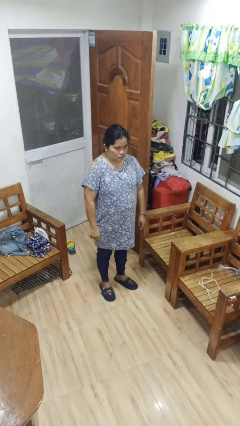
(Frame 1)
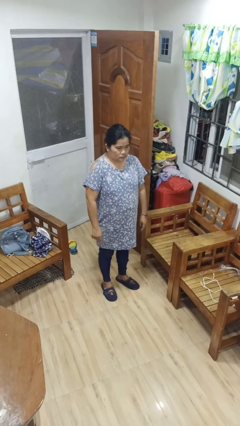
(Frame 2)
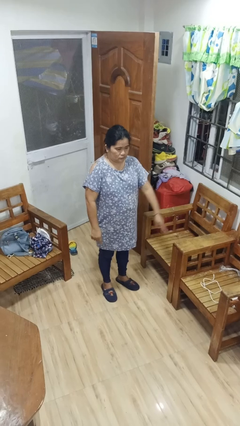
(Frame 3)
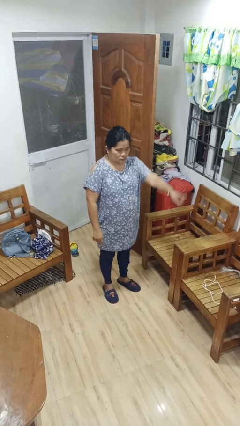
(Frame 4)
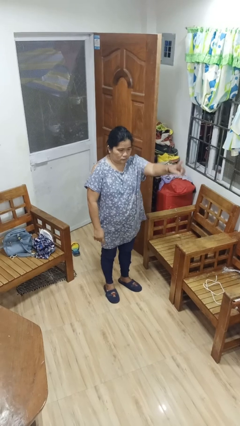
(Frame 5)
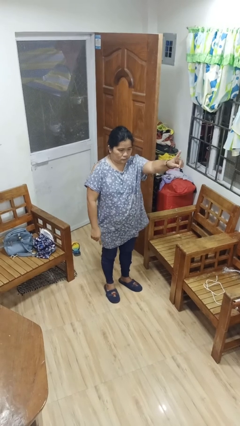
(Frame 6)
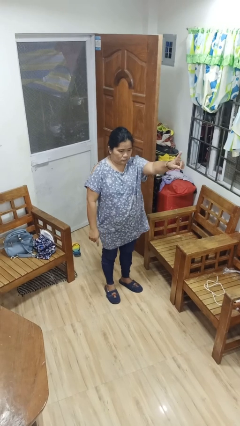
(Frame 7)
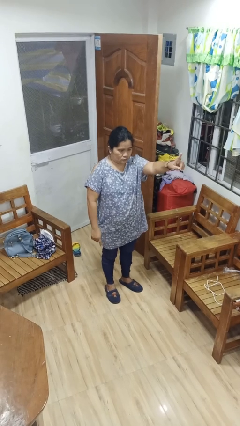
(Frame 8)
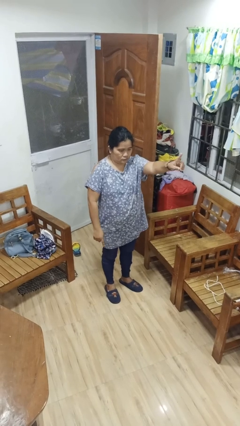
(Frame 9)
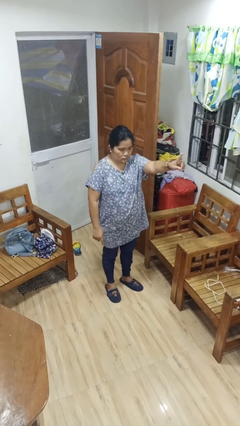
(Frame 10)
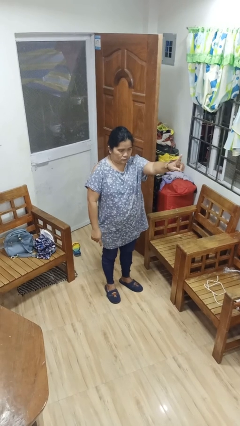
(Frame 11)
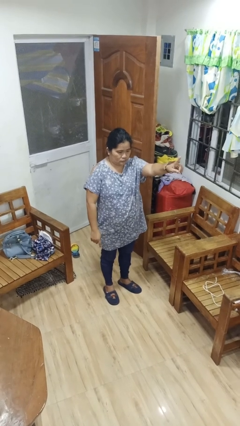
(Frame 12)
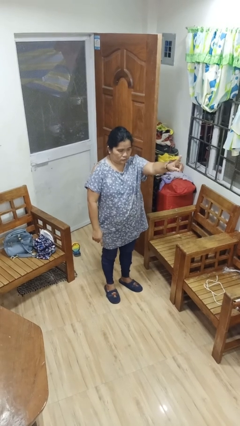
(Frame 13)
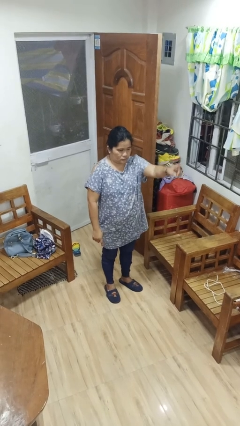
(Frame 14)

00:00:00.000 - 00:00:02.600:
person gestures number one

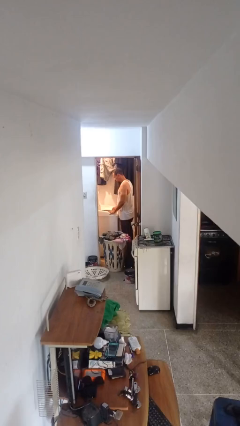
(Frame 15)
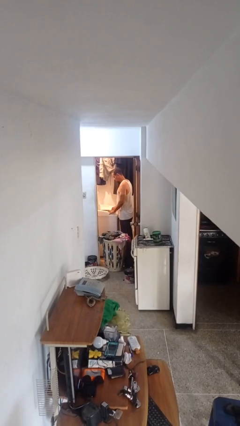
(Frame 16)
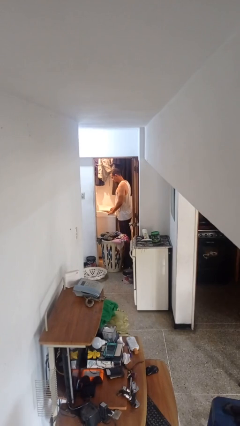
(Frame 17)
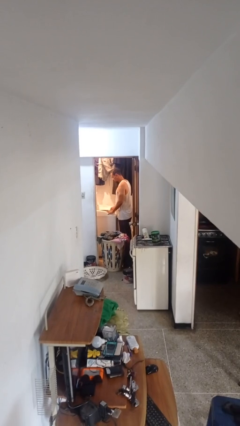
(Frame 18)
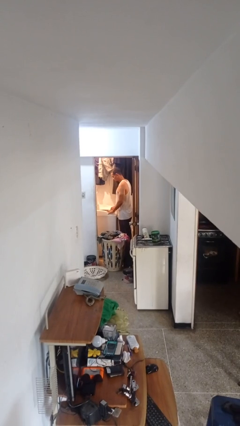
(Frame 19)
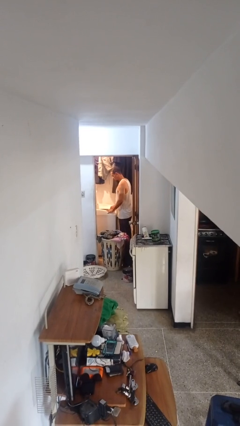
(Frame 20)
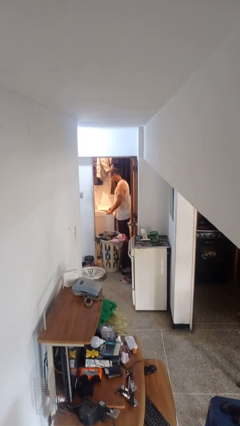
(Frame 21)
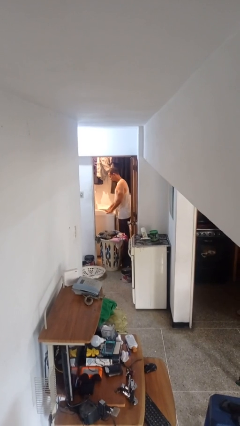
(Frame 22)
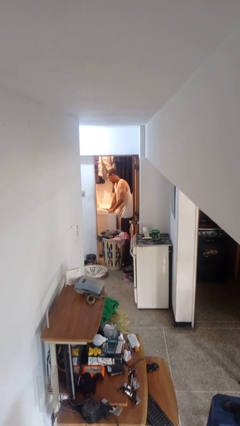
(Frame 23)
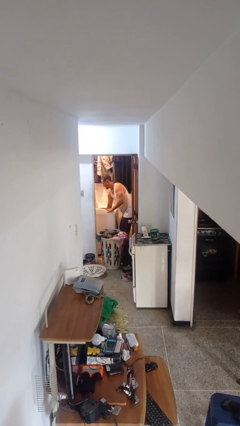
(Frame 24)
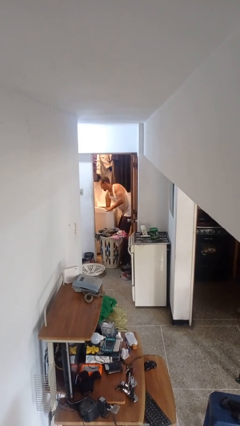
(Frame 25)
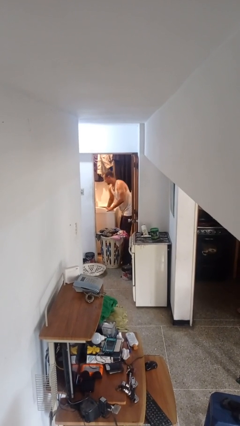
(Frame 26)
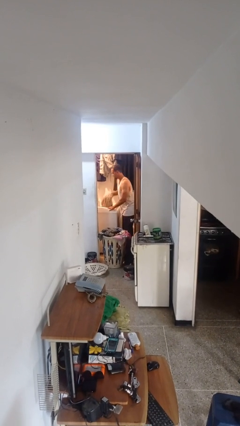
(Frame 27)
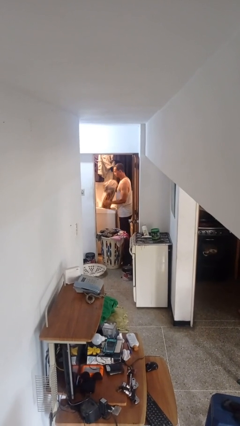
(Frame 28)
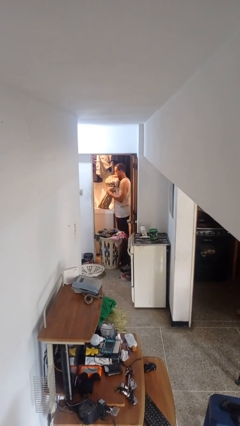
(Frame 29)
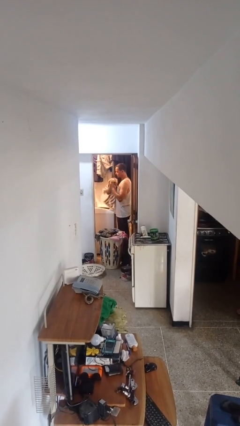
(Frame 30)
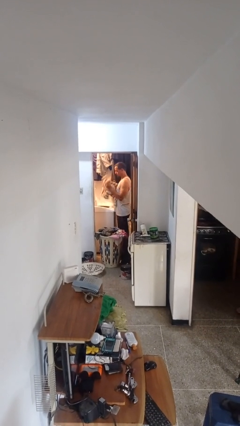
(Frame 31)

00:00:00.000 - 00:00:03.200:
person unloads clotheswasher

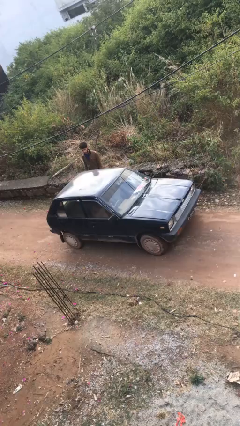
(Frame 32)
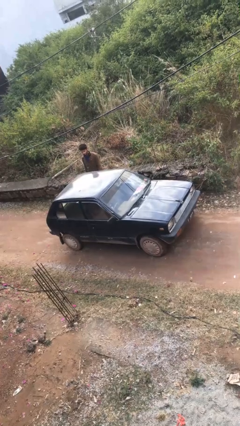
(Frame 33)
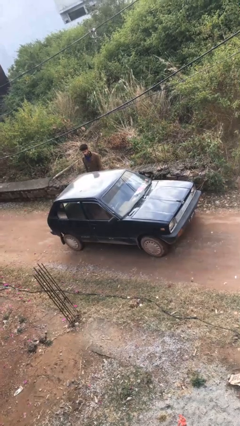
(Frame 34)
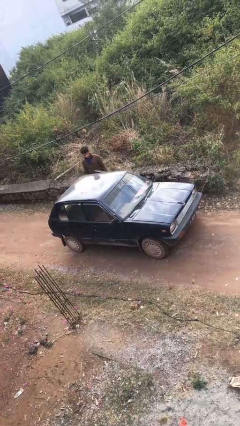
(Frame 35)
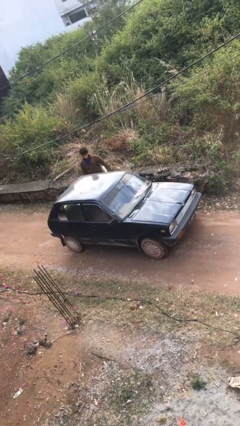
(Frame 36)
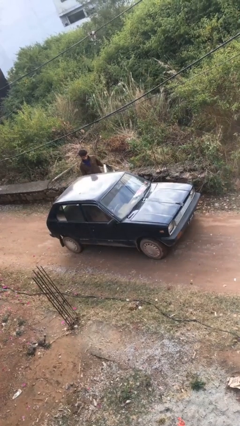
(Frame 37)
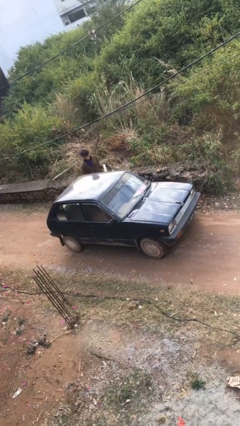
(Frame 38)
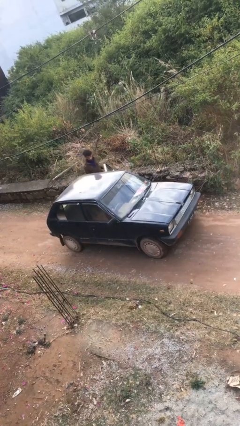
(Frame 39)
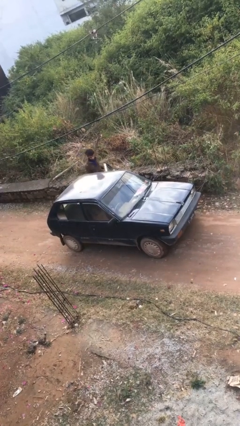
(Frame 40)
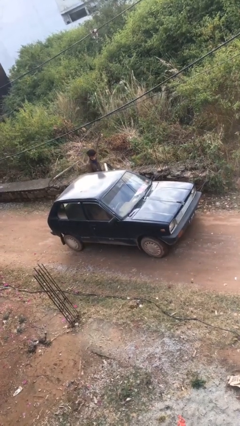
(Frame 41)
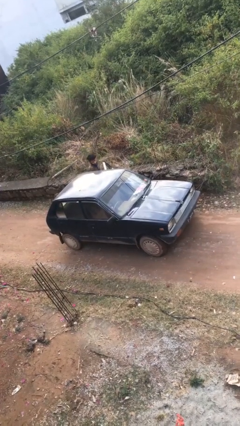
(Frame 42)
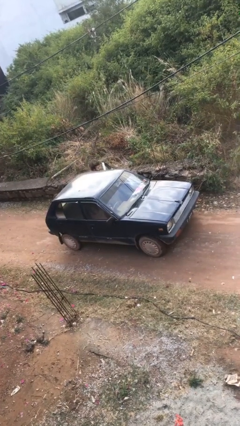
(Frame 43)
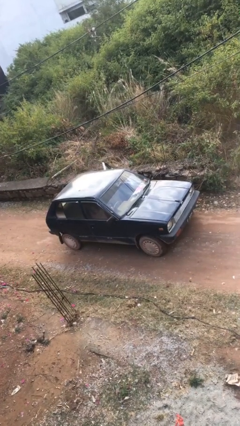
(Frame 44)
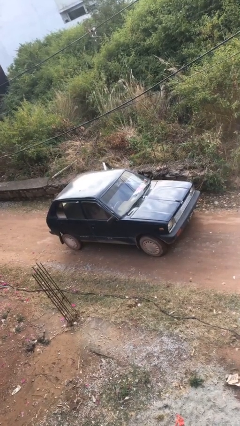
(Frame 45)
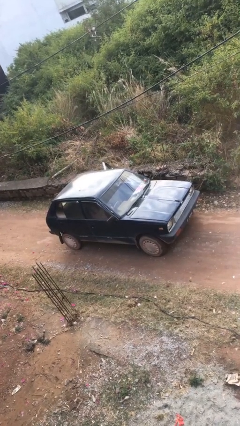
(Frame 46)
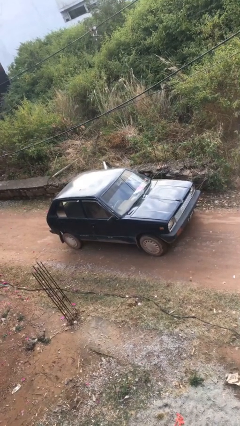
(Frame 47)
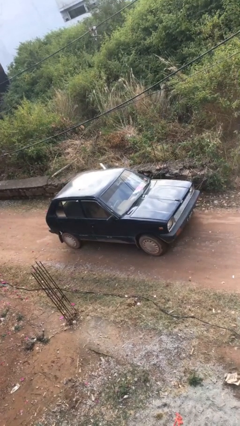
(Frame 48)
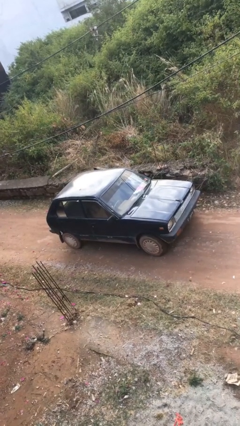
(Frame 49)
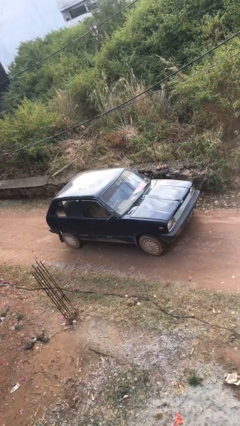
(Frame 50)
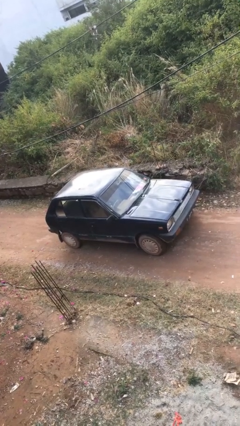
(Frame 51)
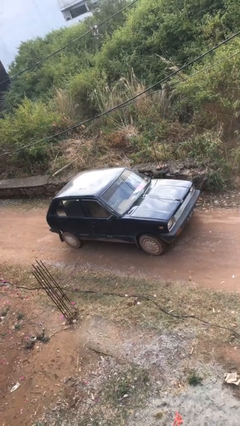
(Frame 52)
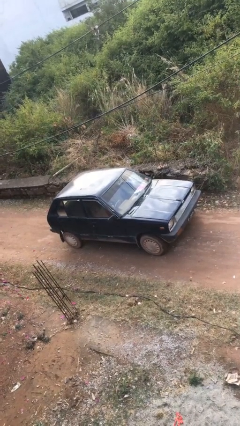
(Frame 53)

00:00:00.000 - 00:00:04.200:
car picks up person

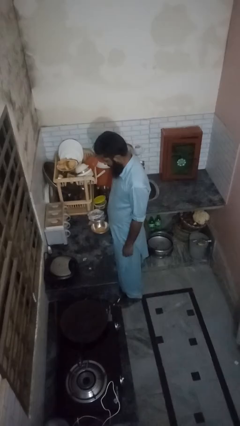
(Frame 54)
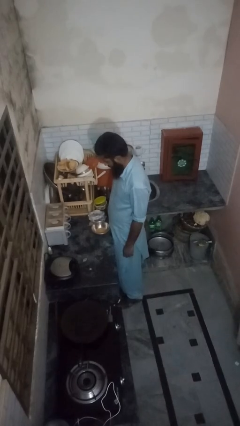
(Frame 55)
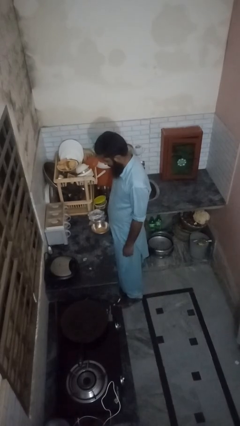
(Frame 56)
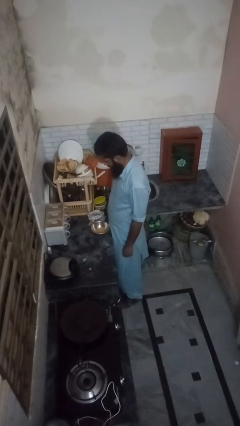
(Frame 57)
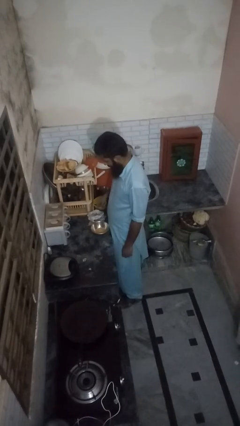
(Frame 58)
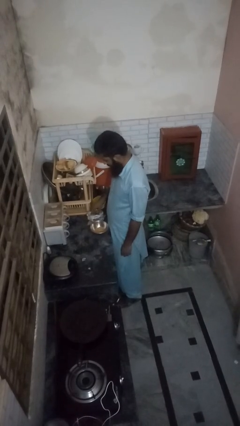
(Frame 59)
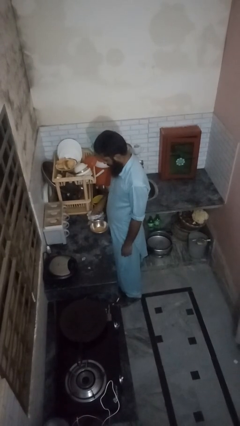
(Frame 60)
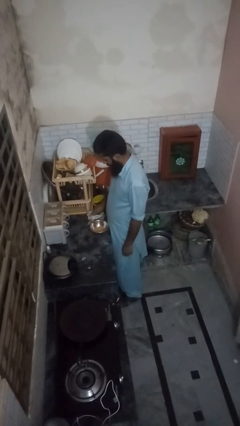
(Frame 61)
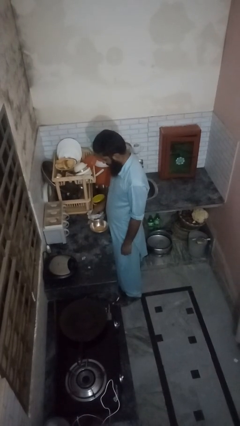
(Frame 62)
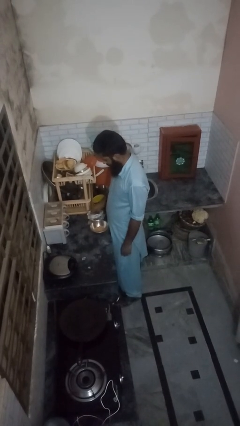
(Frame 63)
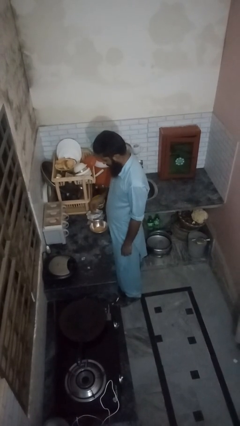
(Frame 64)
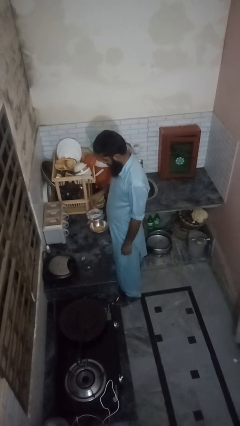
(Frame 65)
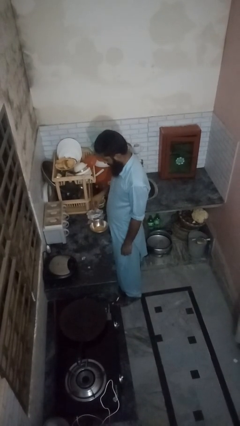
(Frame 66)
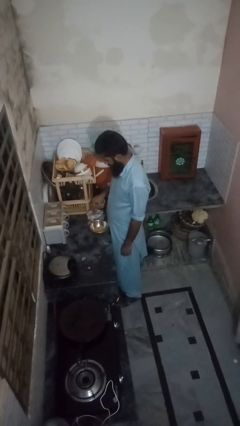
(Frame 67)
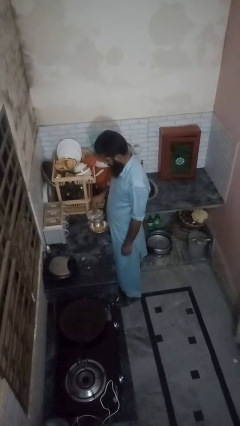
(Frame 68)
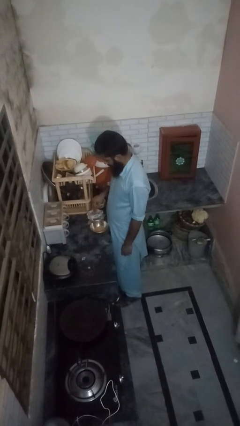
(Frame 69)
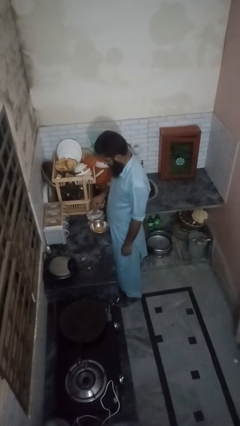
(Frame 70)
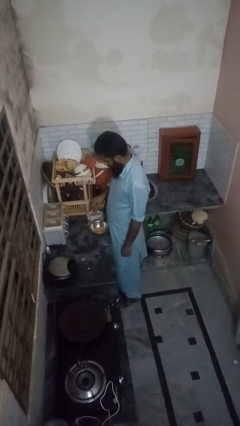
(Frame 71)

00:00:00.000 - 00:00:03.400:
person pours into bowl

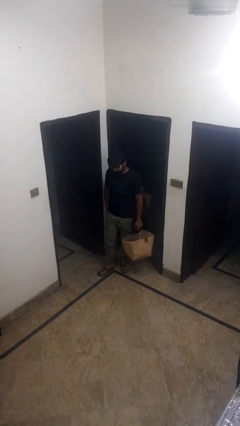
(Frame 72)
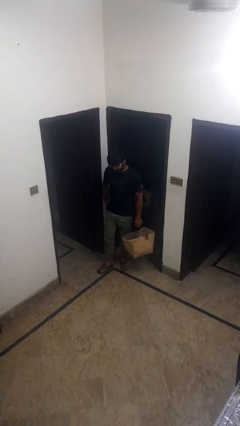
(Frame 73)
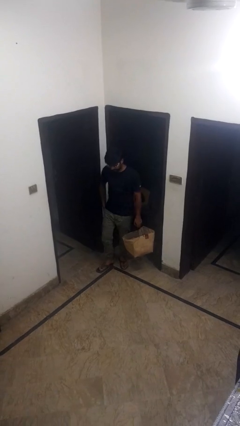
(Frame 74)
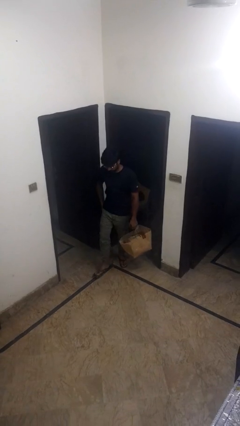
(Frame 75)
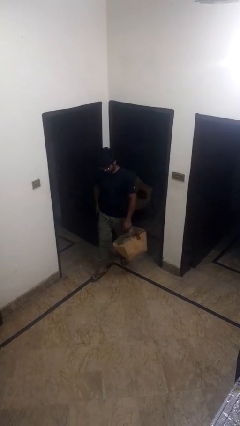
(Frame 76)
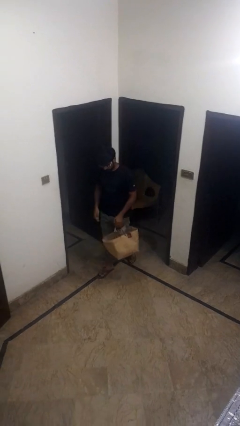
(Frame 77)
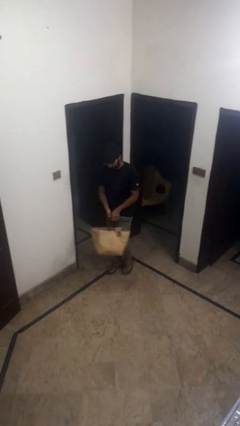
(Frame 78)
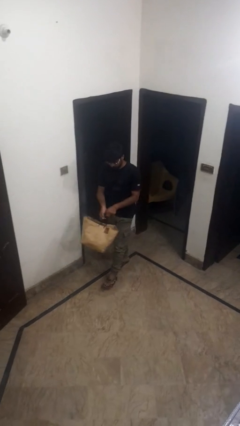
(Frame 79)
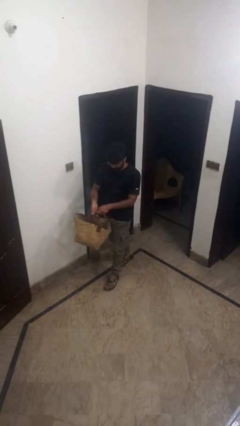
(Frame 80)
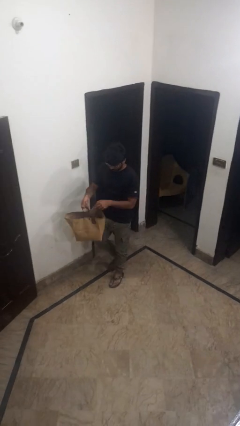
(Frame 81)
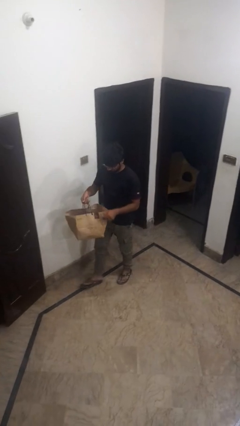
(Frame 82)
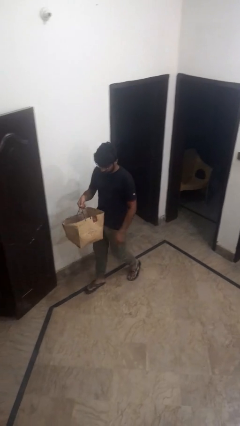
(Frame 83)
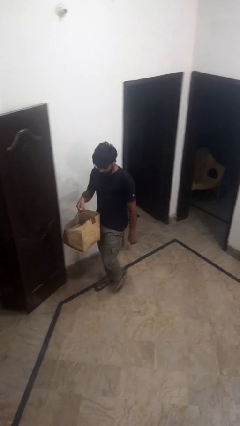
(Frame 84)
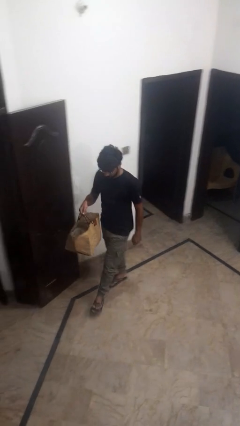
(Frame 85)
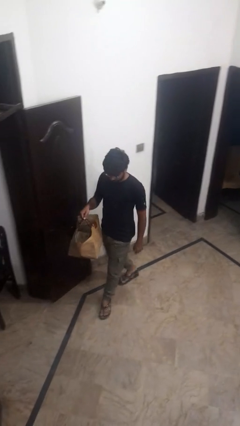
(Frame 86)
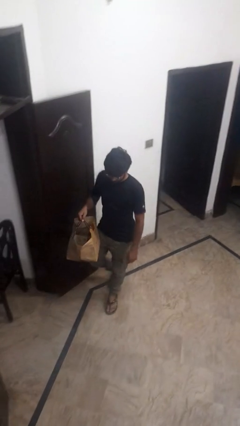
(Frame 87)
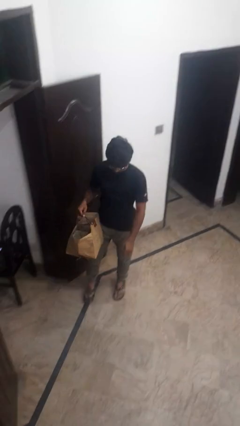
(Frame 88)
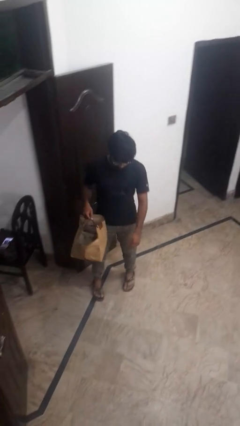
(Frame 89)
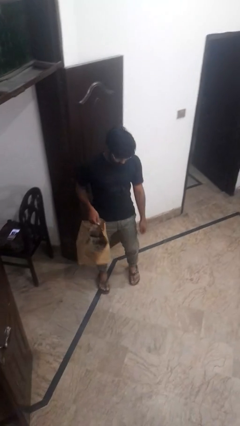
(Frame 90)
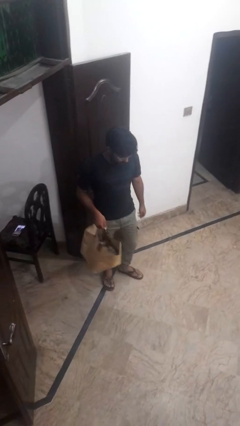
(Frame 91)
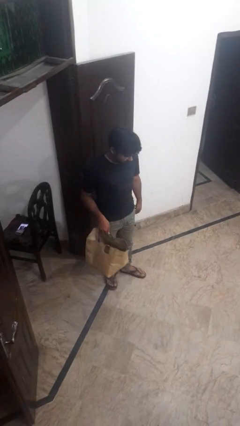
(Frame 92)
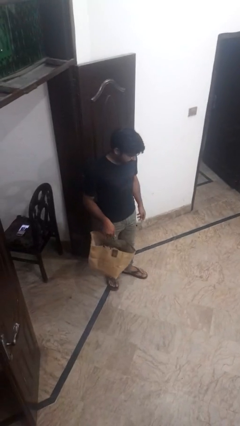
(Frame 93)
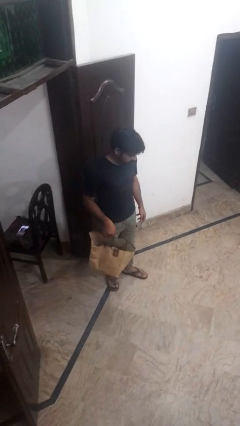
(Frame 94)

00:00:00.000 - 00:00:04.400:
person carries groceries
